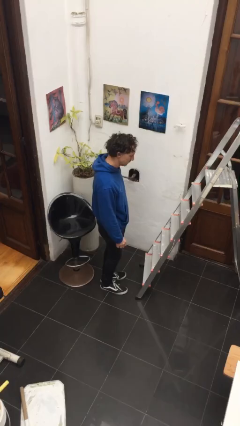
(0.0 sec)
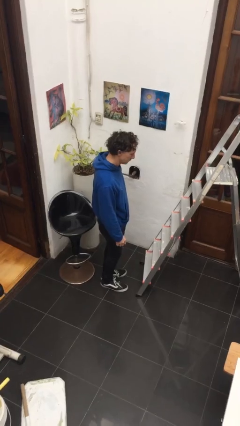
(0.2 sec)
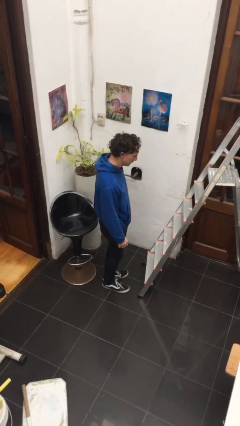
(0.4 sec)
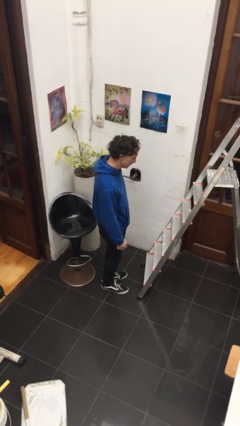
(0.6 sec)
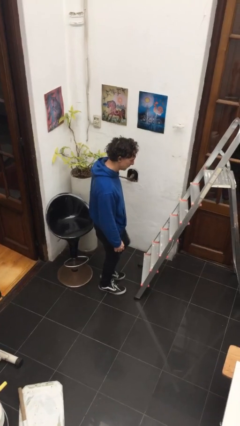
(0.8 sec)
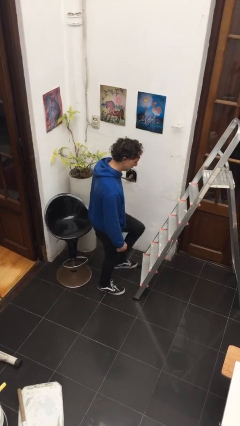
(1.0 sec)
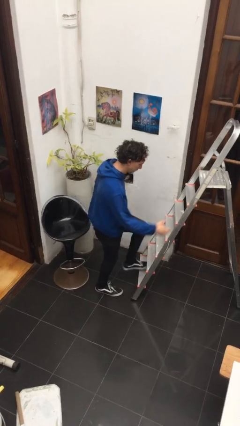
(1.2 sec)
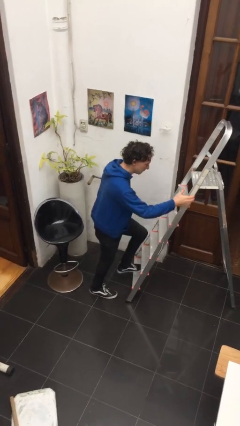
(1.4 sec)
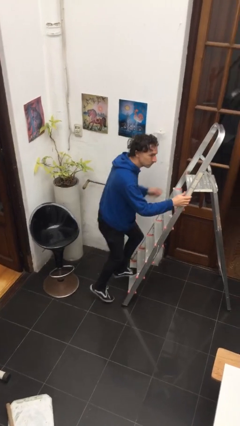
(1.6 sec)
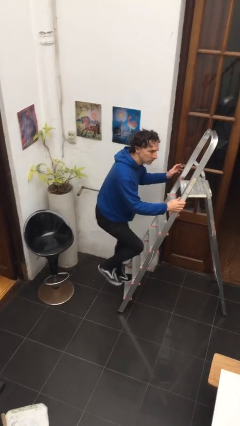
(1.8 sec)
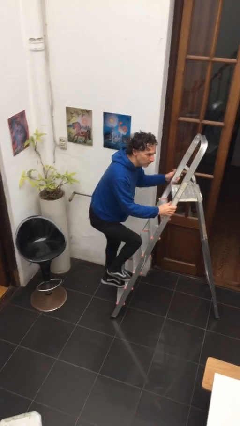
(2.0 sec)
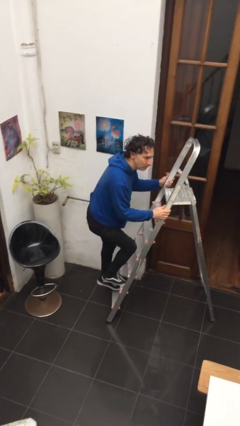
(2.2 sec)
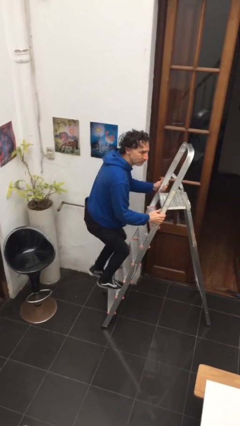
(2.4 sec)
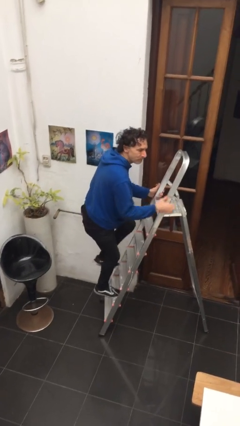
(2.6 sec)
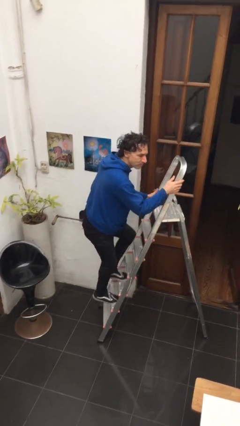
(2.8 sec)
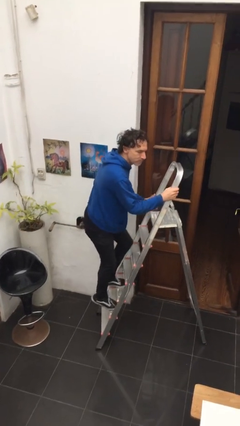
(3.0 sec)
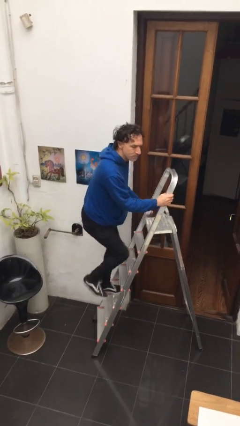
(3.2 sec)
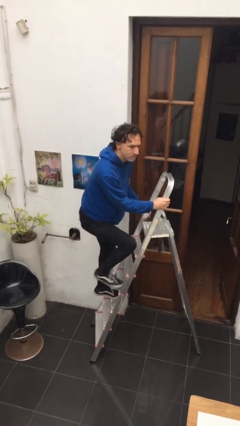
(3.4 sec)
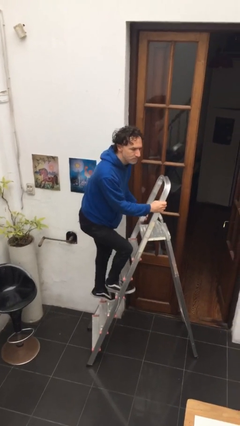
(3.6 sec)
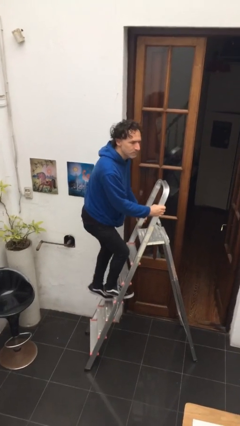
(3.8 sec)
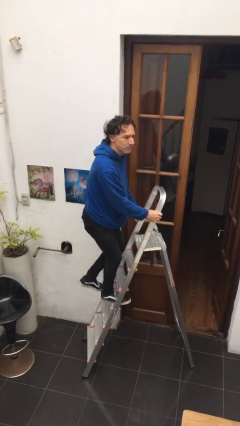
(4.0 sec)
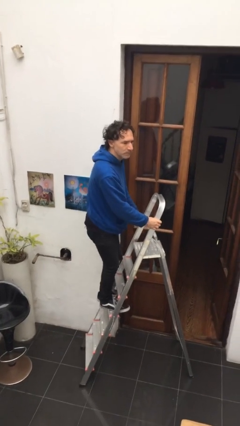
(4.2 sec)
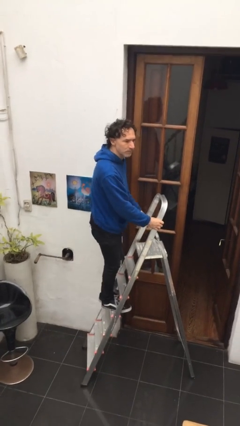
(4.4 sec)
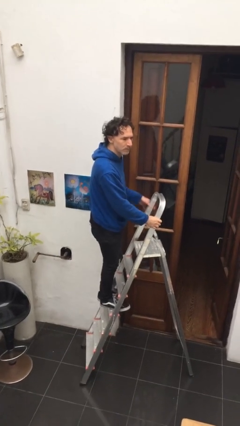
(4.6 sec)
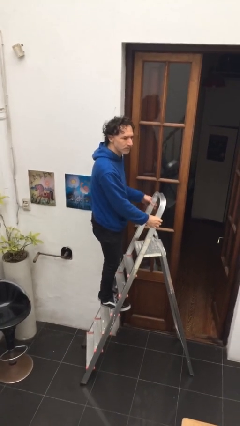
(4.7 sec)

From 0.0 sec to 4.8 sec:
person climbs up ladder

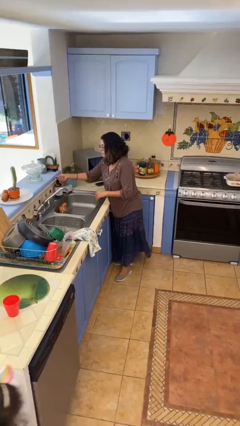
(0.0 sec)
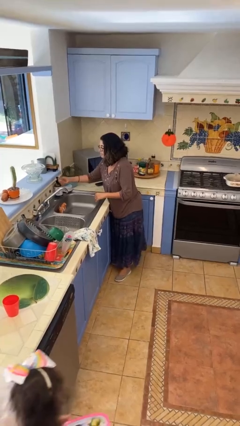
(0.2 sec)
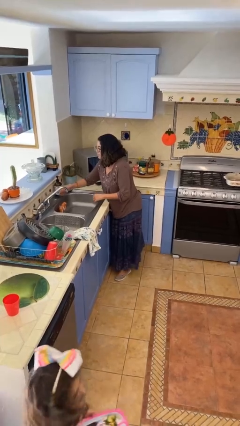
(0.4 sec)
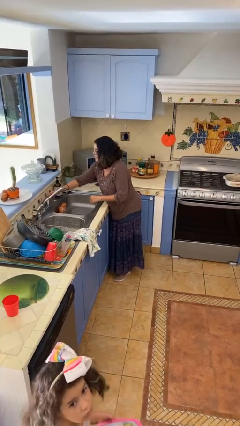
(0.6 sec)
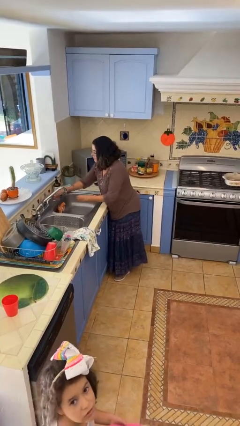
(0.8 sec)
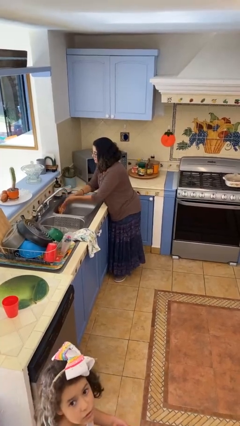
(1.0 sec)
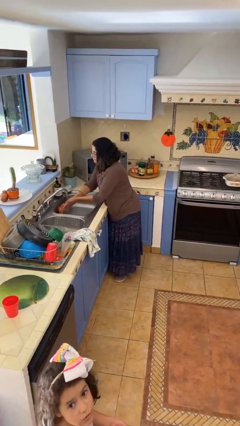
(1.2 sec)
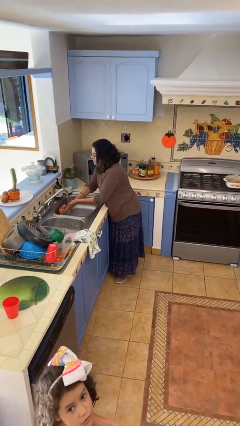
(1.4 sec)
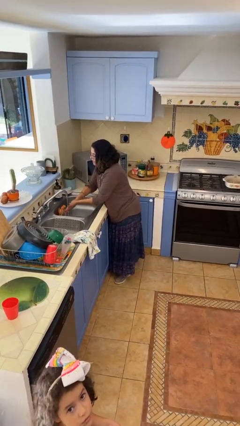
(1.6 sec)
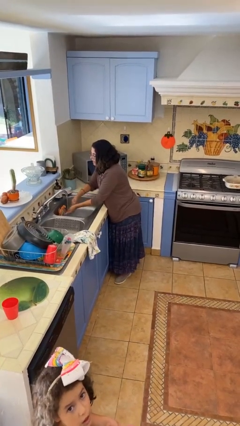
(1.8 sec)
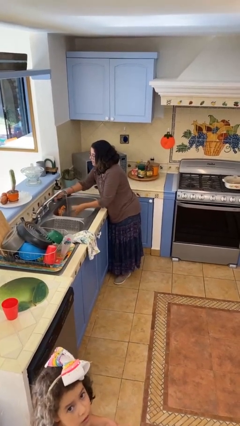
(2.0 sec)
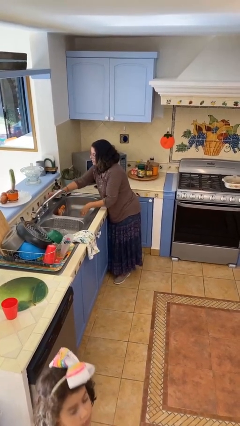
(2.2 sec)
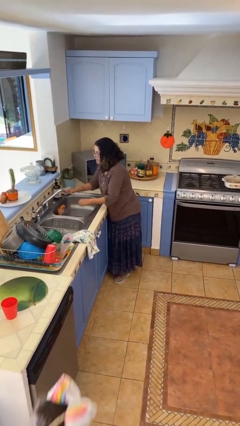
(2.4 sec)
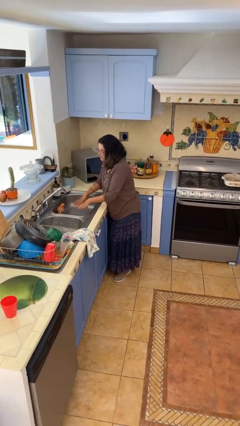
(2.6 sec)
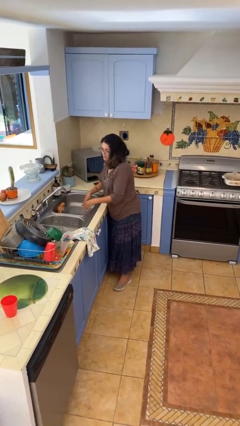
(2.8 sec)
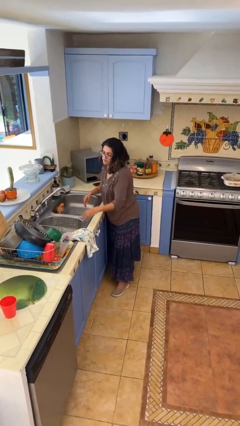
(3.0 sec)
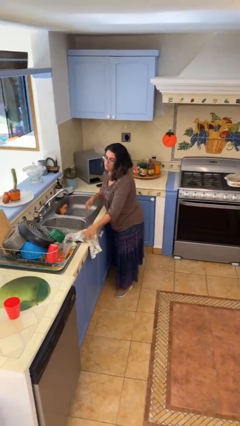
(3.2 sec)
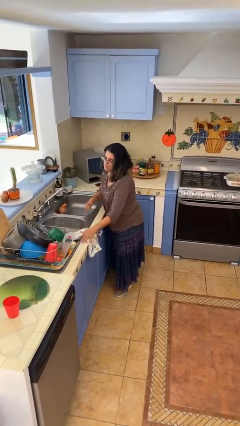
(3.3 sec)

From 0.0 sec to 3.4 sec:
person washes hands

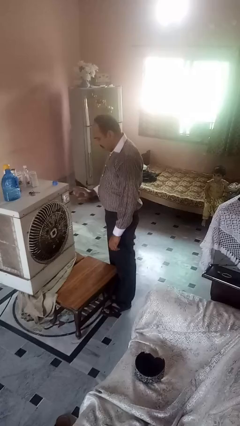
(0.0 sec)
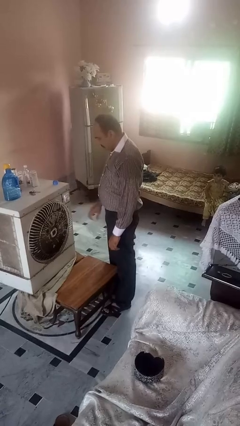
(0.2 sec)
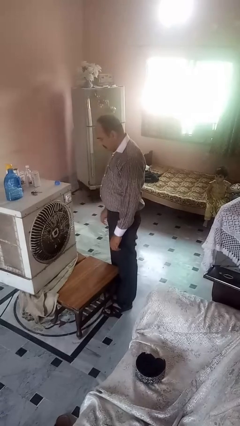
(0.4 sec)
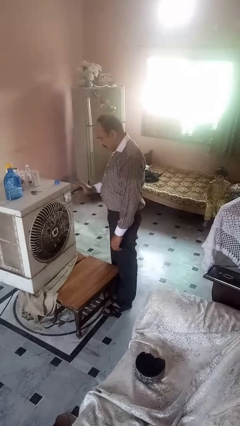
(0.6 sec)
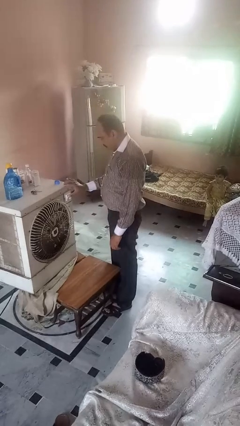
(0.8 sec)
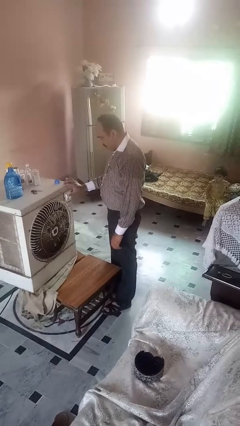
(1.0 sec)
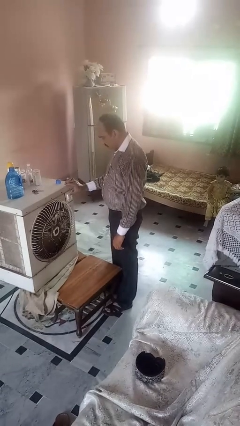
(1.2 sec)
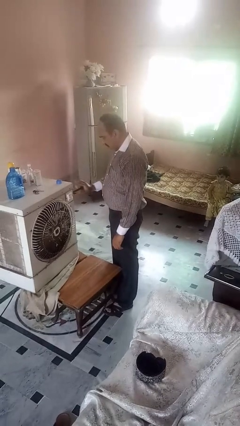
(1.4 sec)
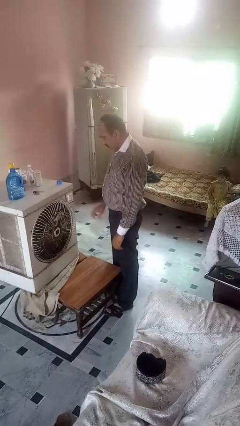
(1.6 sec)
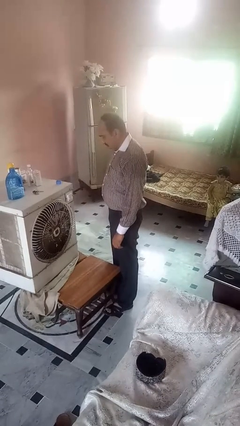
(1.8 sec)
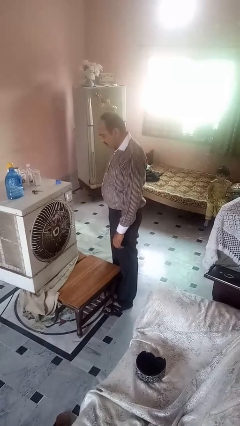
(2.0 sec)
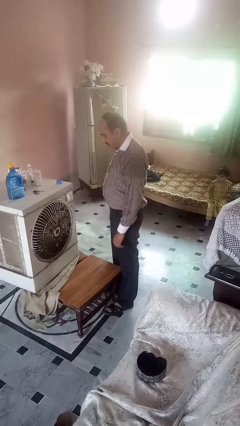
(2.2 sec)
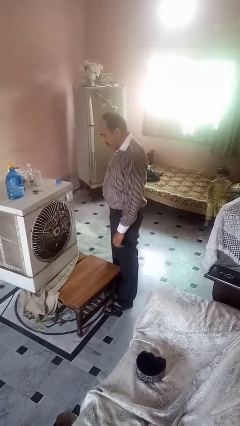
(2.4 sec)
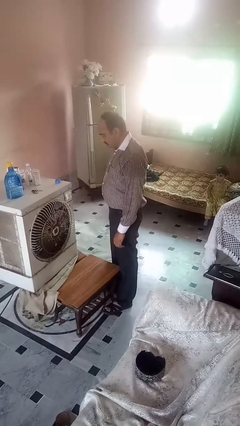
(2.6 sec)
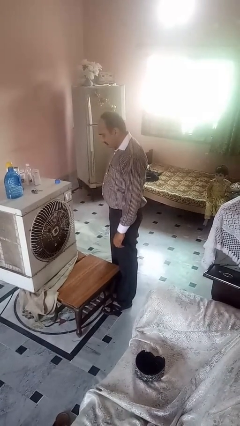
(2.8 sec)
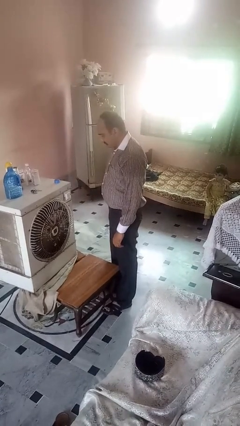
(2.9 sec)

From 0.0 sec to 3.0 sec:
person turns off fan

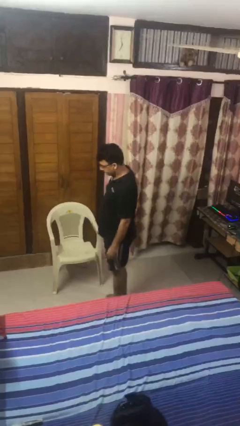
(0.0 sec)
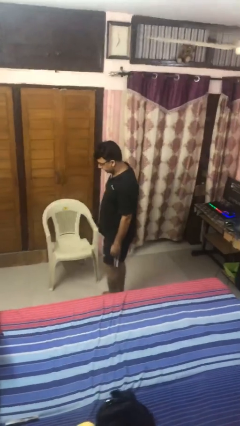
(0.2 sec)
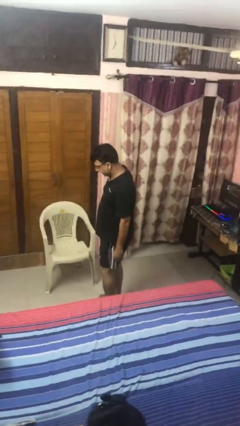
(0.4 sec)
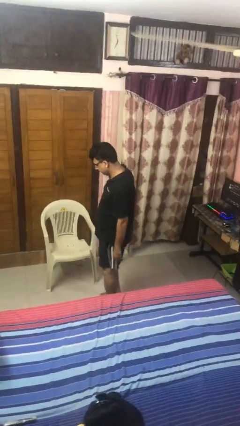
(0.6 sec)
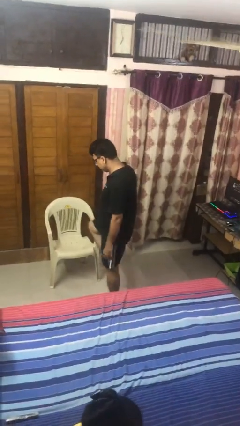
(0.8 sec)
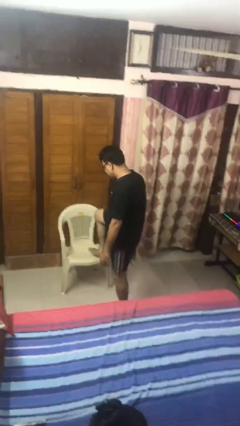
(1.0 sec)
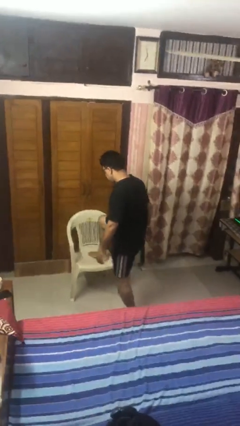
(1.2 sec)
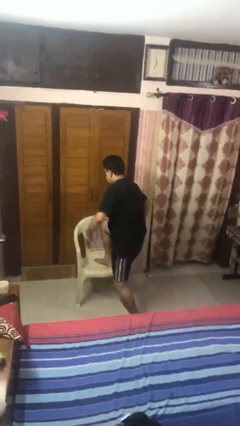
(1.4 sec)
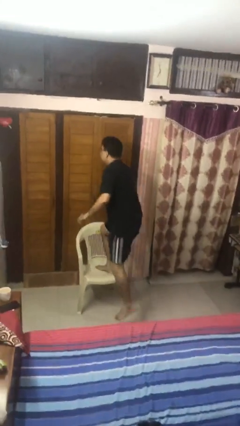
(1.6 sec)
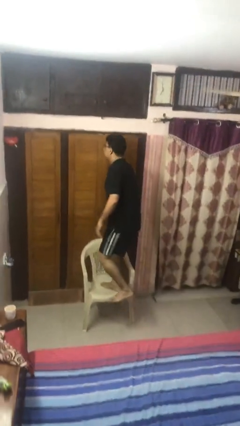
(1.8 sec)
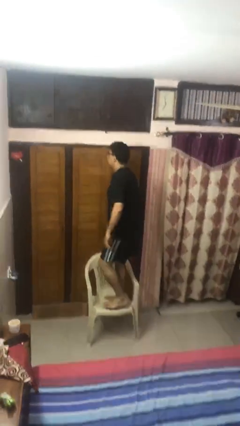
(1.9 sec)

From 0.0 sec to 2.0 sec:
person climbs on chair

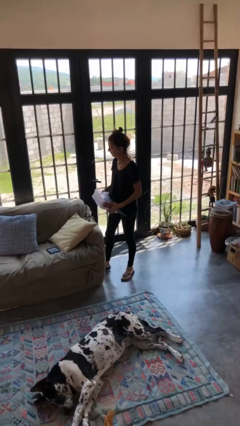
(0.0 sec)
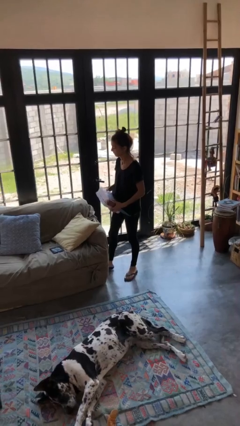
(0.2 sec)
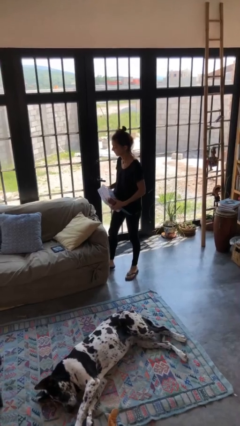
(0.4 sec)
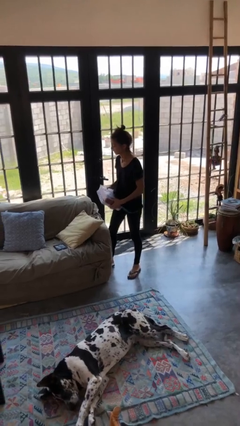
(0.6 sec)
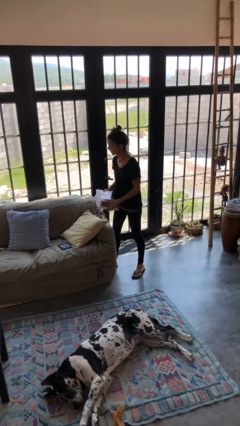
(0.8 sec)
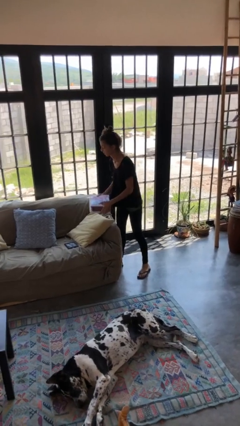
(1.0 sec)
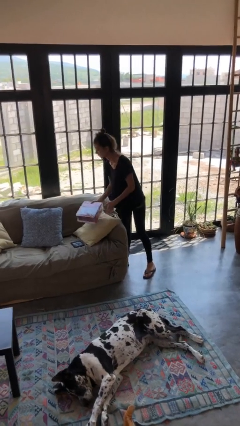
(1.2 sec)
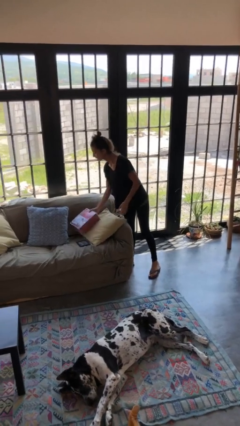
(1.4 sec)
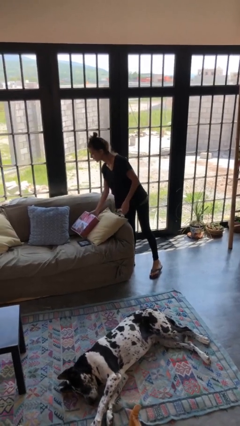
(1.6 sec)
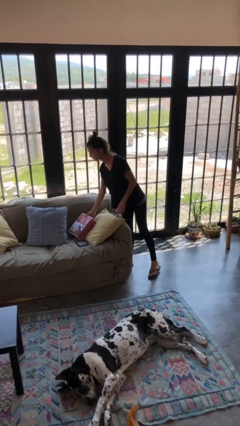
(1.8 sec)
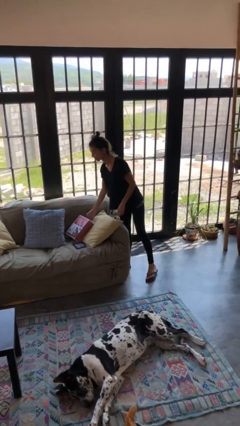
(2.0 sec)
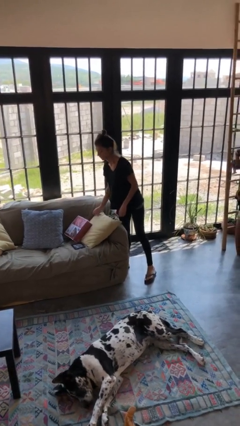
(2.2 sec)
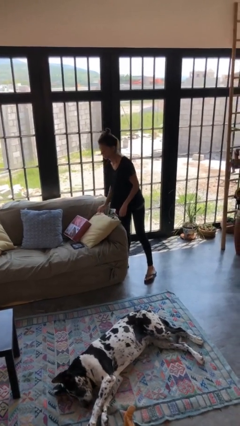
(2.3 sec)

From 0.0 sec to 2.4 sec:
person puts down object on couch

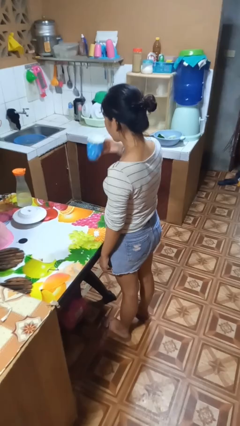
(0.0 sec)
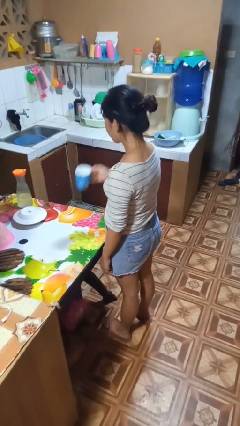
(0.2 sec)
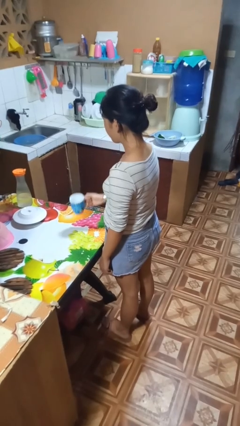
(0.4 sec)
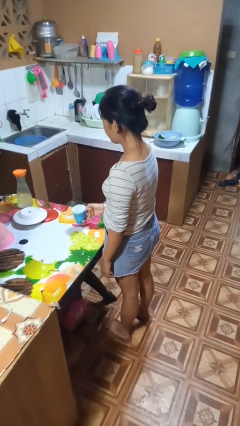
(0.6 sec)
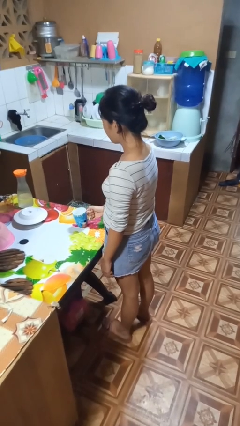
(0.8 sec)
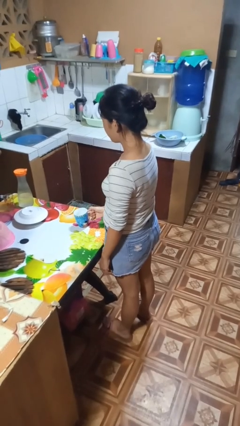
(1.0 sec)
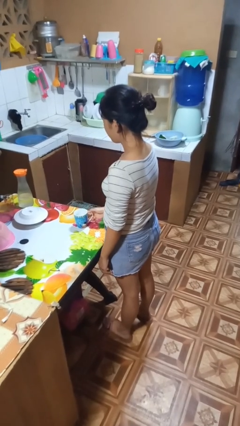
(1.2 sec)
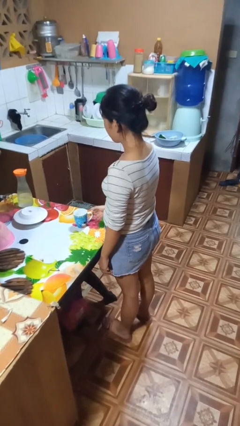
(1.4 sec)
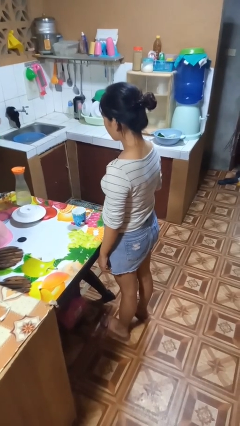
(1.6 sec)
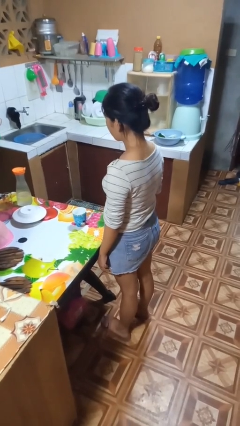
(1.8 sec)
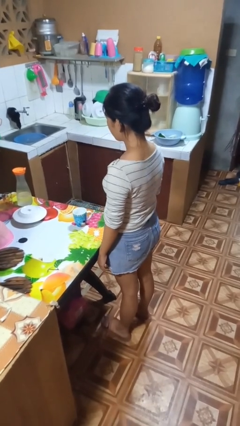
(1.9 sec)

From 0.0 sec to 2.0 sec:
person puts down object on table
